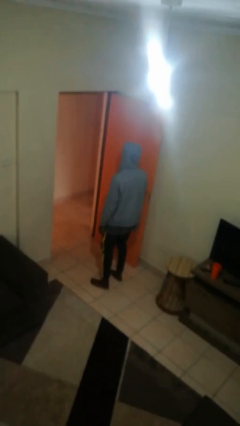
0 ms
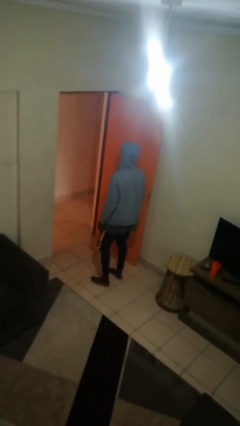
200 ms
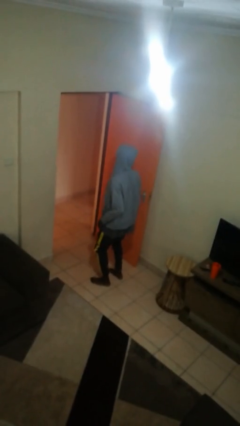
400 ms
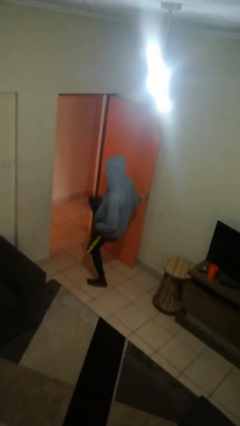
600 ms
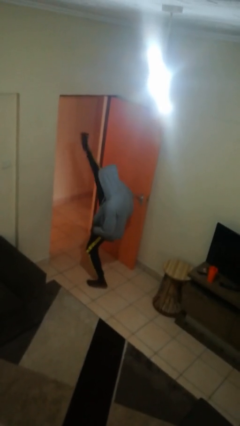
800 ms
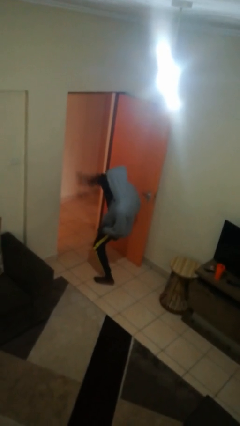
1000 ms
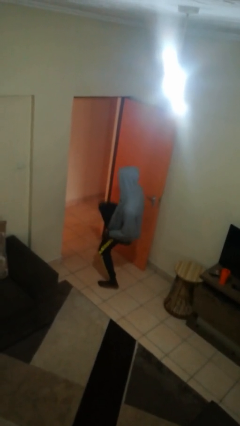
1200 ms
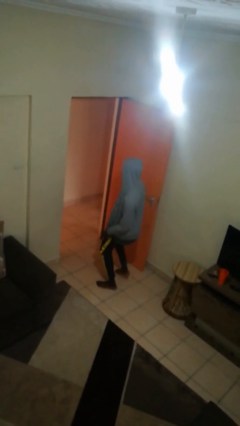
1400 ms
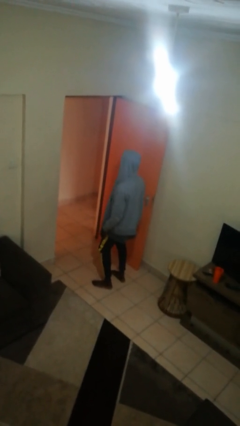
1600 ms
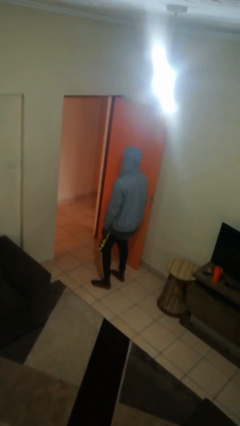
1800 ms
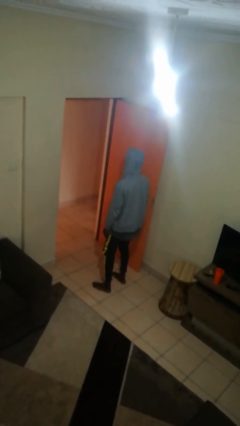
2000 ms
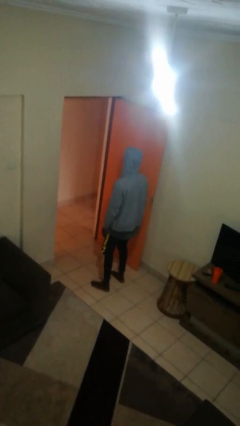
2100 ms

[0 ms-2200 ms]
person karate kicks

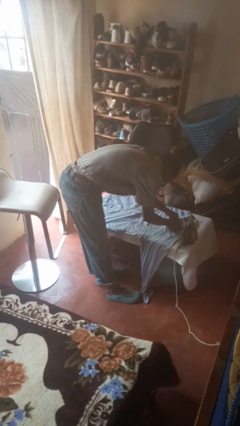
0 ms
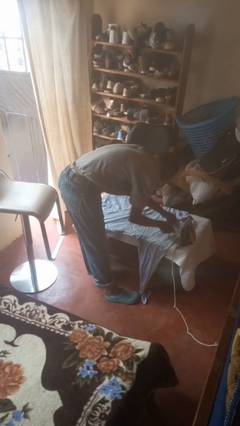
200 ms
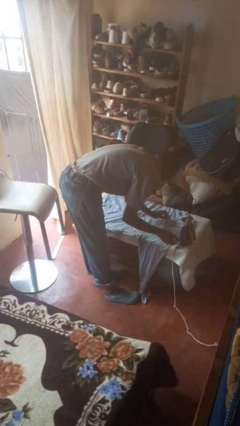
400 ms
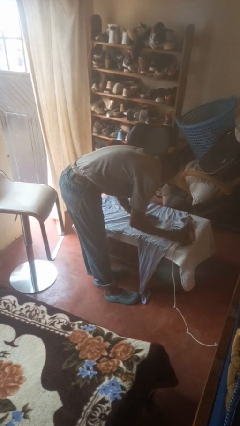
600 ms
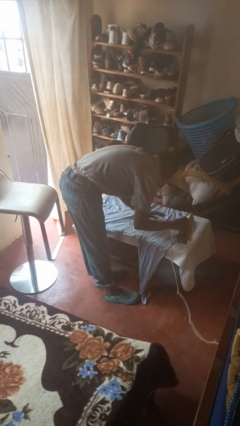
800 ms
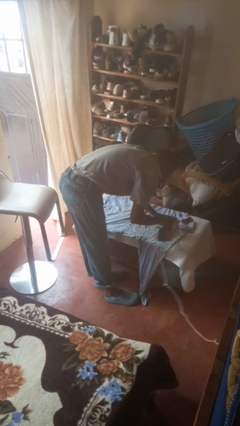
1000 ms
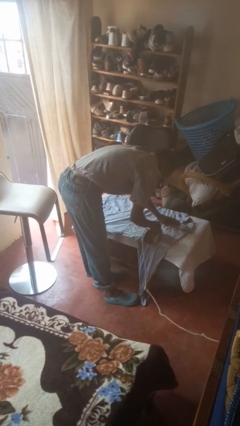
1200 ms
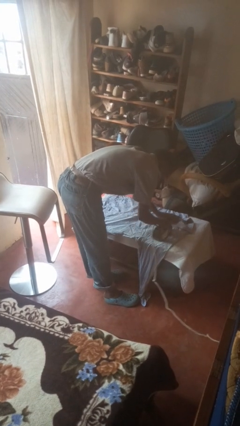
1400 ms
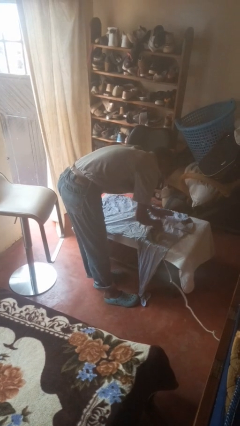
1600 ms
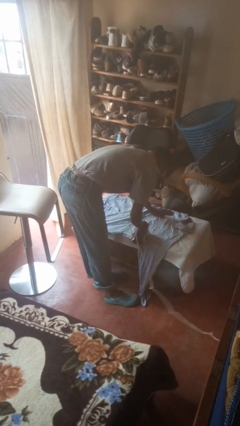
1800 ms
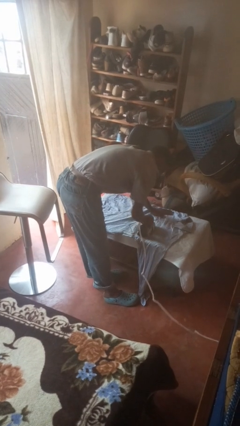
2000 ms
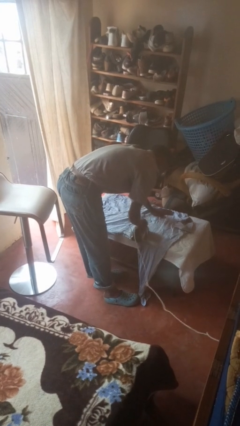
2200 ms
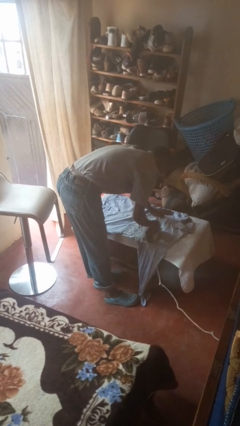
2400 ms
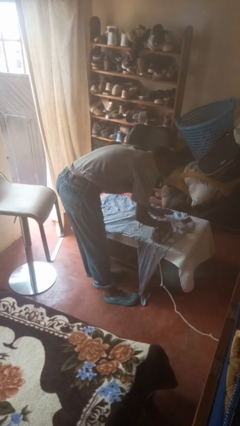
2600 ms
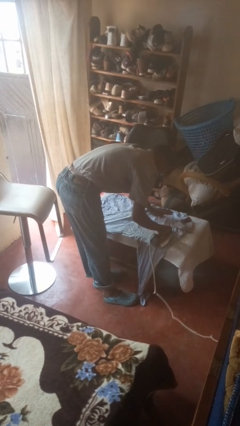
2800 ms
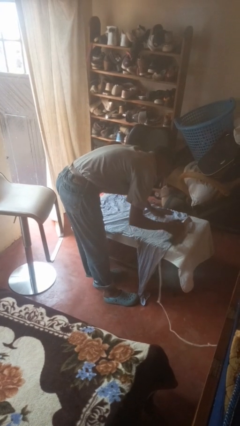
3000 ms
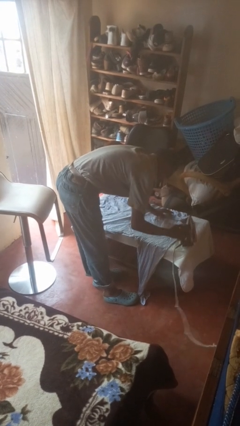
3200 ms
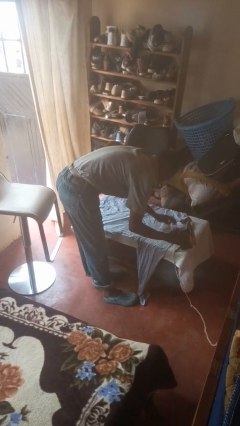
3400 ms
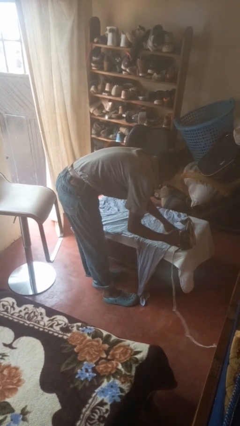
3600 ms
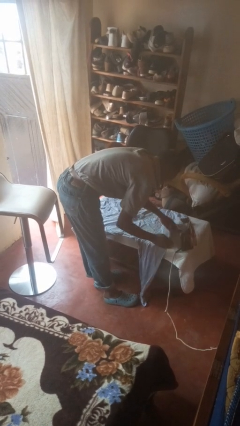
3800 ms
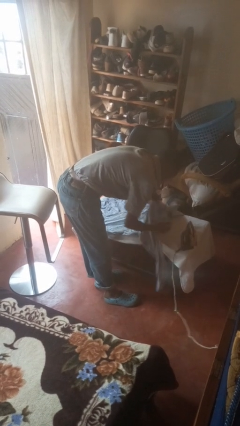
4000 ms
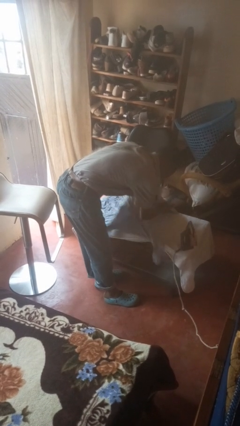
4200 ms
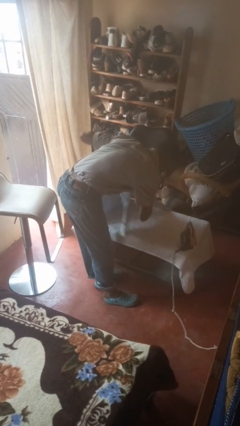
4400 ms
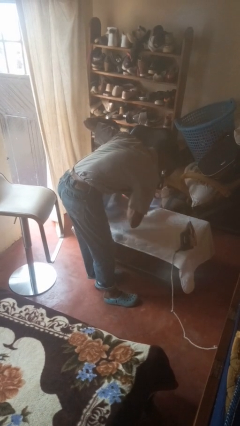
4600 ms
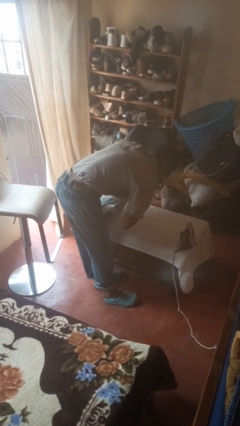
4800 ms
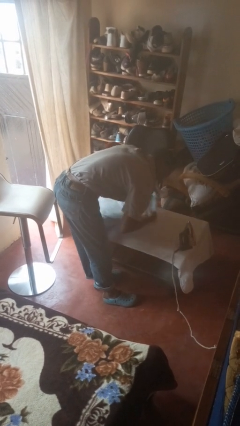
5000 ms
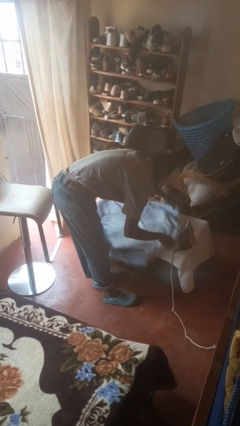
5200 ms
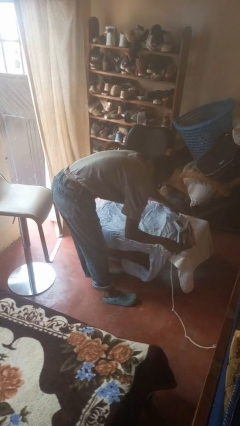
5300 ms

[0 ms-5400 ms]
person irons clothes

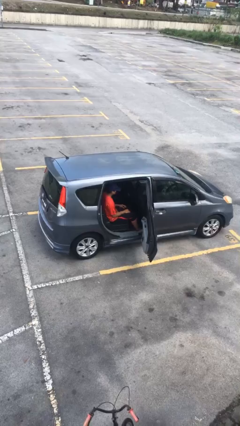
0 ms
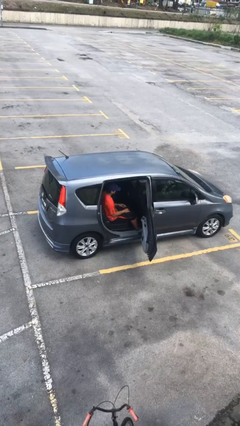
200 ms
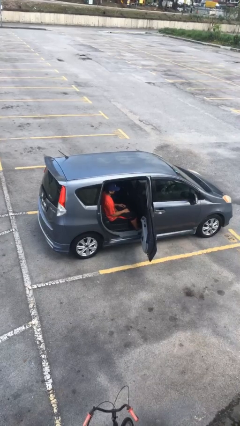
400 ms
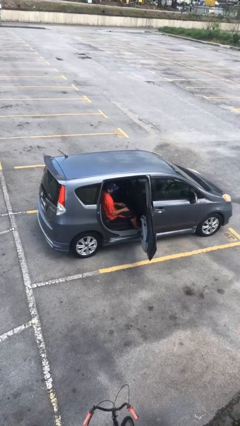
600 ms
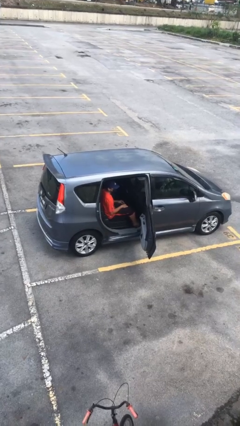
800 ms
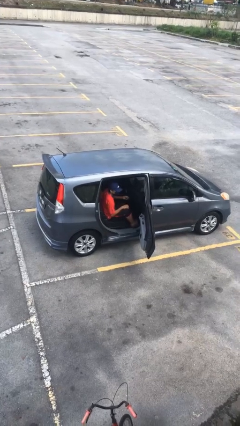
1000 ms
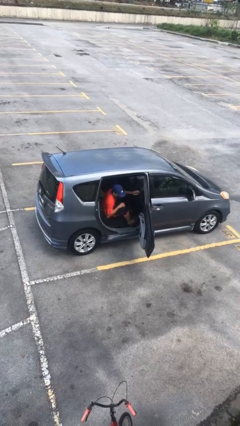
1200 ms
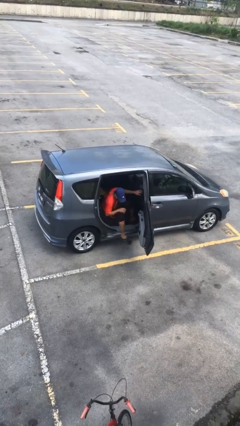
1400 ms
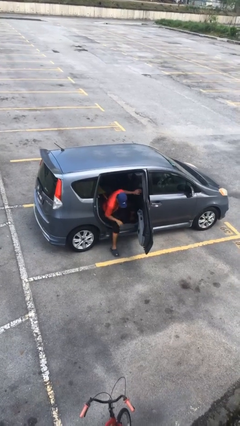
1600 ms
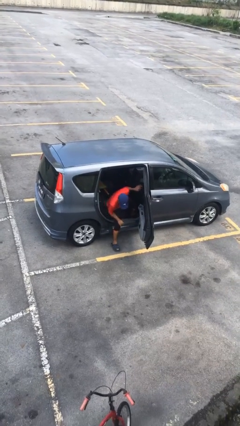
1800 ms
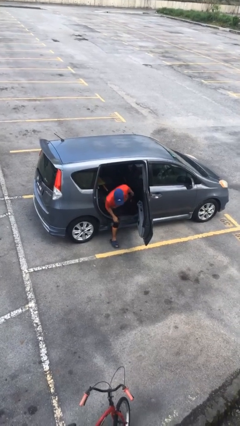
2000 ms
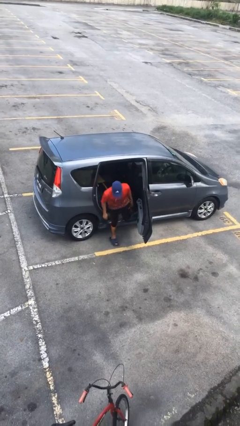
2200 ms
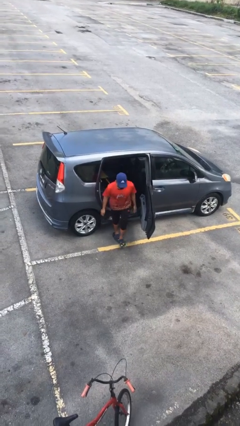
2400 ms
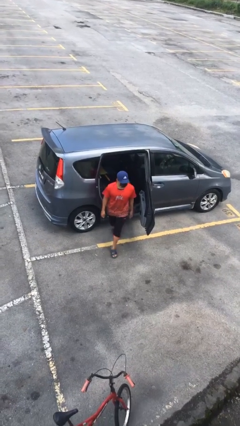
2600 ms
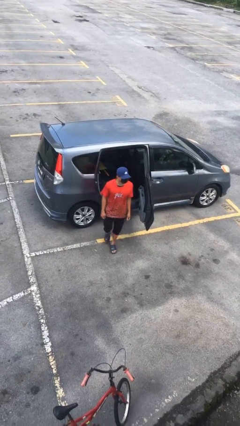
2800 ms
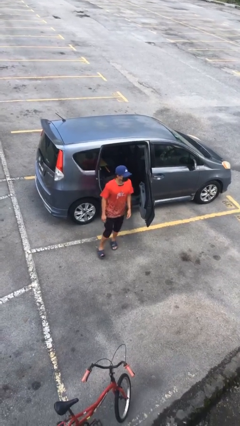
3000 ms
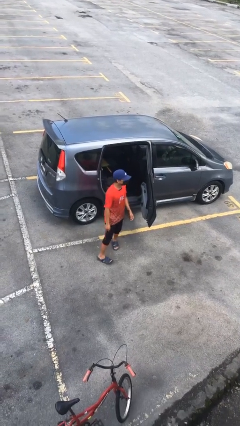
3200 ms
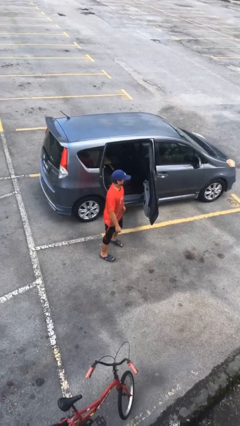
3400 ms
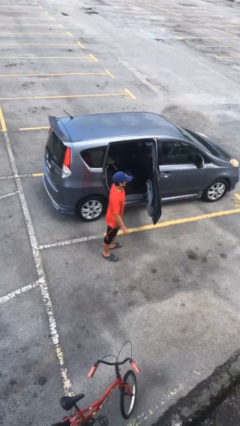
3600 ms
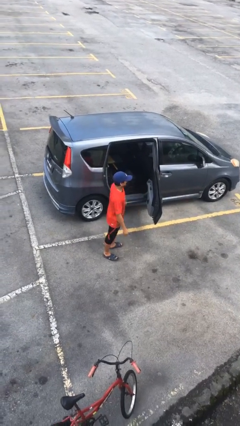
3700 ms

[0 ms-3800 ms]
person exits car

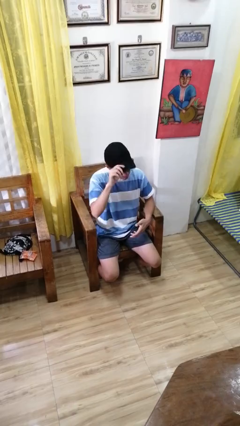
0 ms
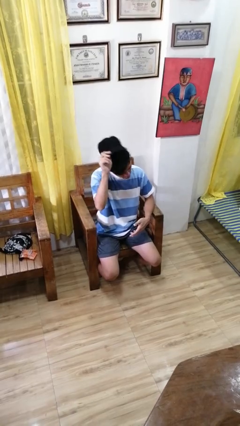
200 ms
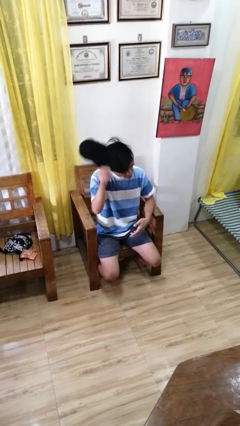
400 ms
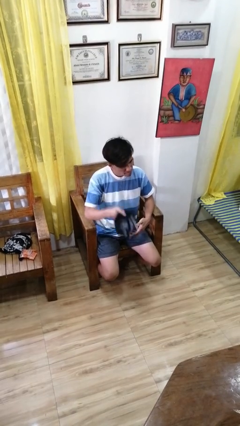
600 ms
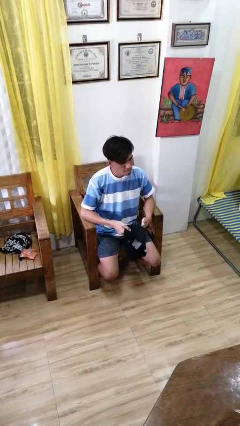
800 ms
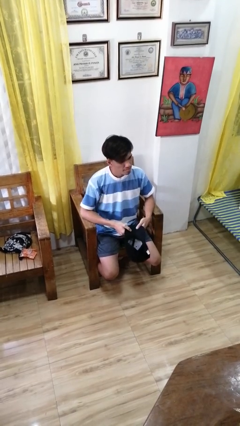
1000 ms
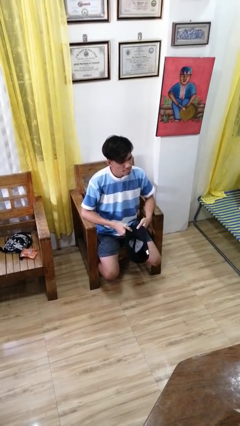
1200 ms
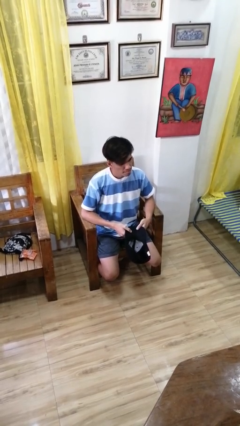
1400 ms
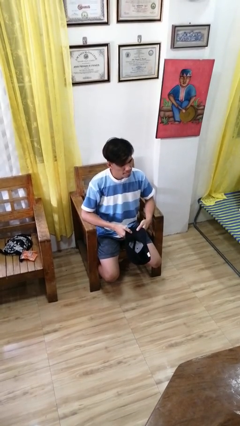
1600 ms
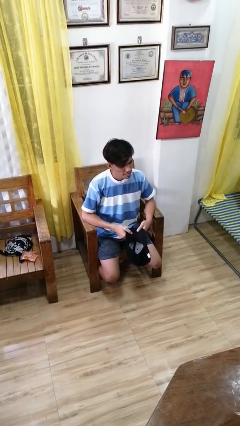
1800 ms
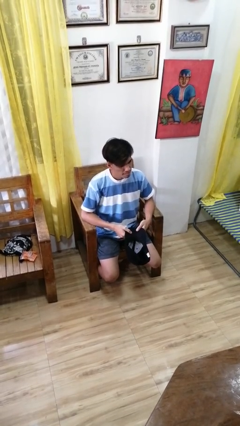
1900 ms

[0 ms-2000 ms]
person takes off hat

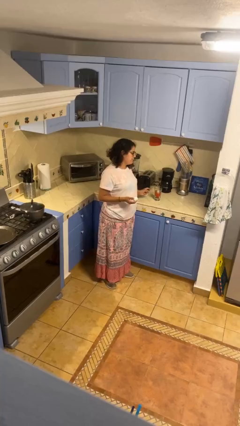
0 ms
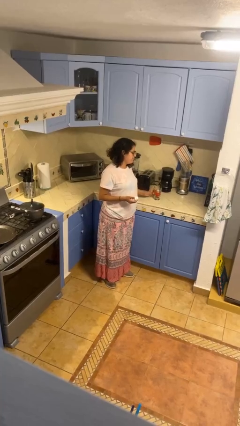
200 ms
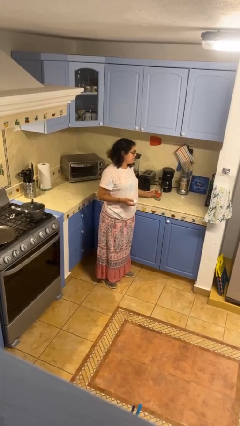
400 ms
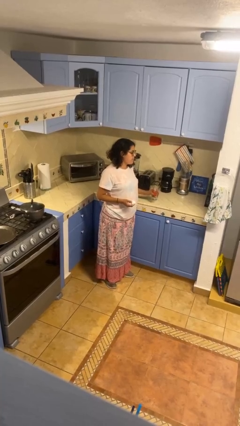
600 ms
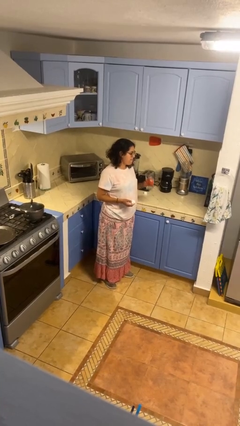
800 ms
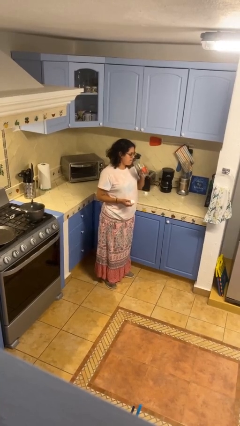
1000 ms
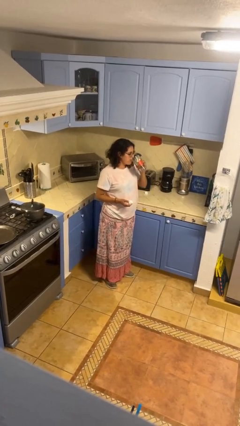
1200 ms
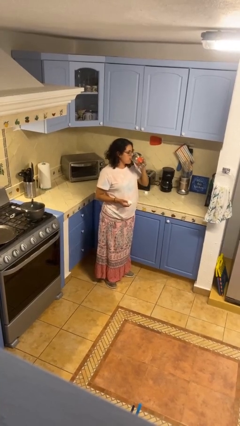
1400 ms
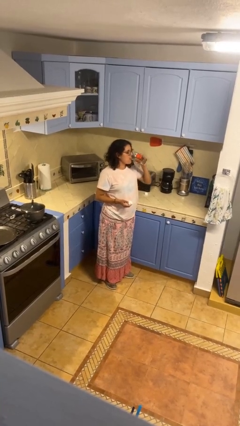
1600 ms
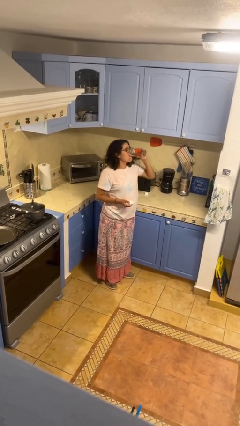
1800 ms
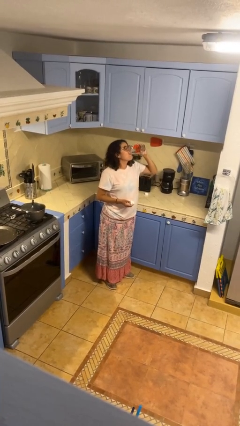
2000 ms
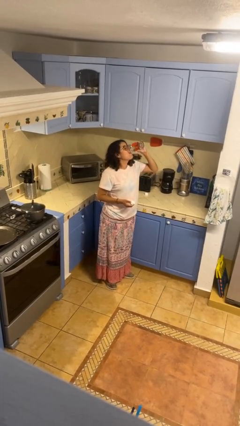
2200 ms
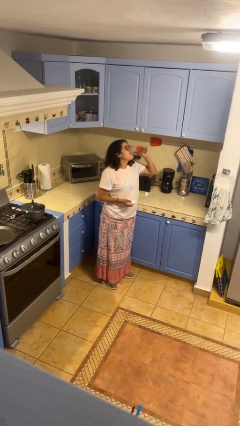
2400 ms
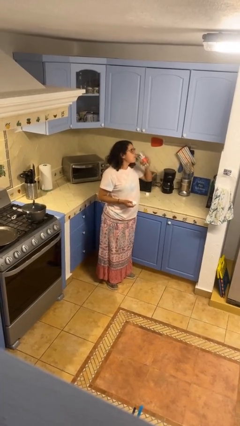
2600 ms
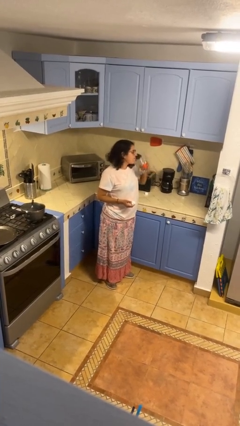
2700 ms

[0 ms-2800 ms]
person drinks from cup

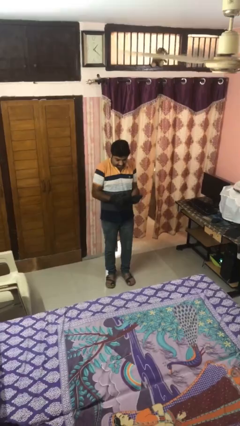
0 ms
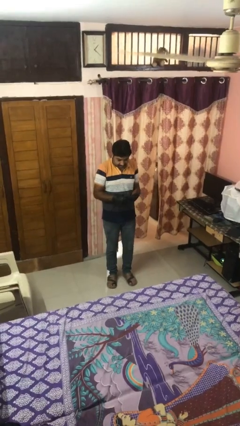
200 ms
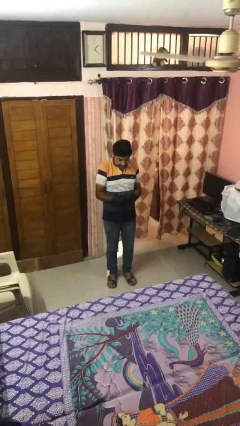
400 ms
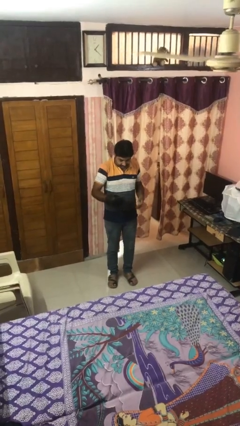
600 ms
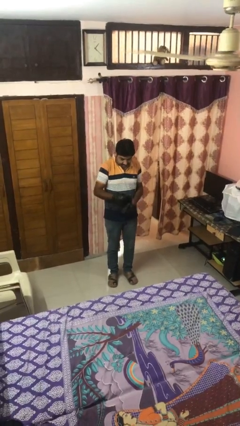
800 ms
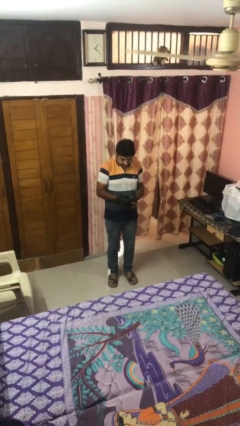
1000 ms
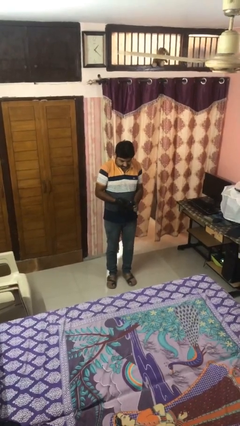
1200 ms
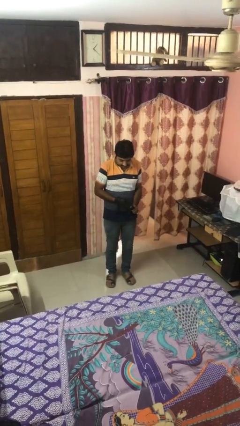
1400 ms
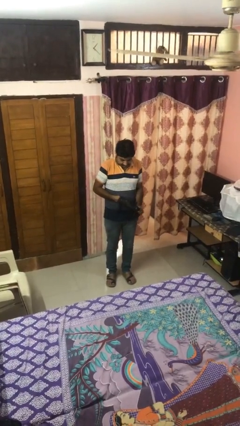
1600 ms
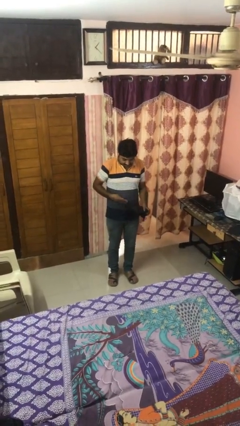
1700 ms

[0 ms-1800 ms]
person takes off gloves
